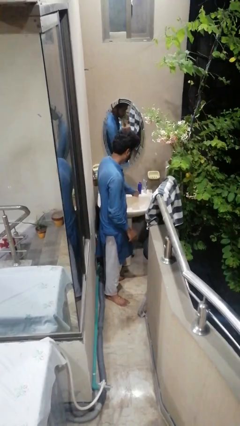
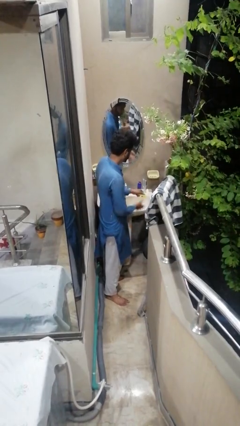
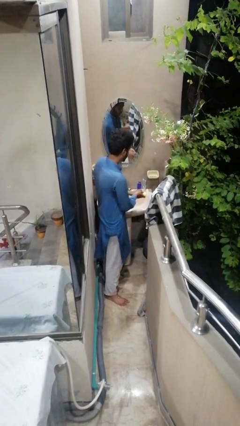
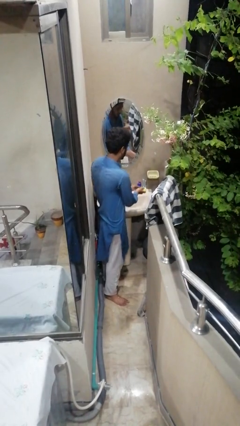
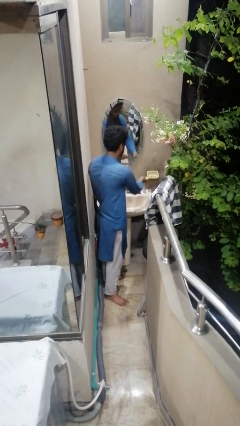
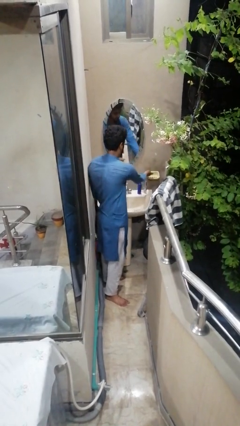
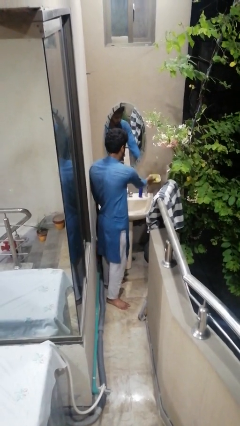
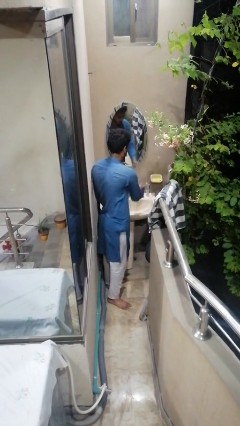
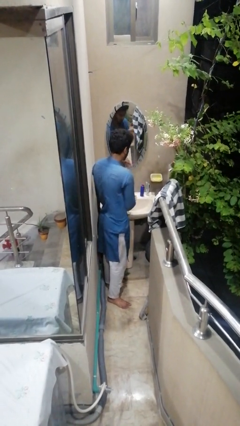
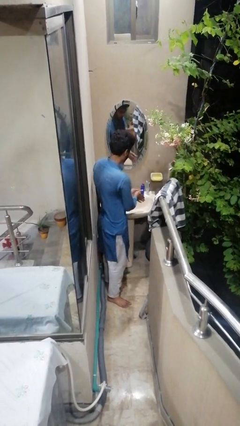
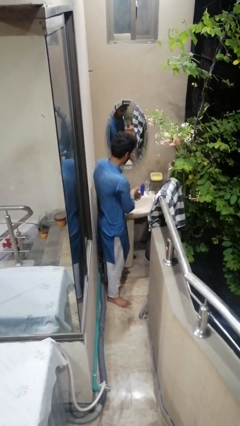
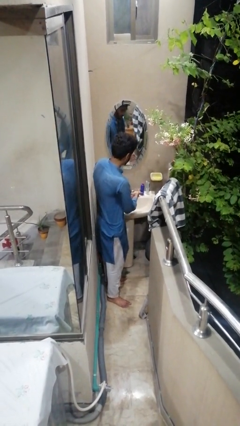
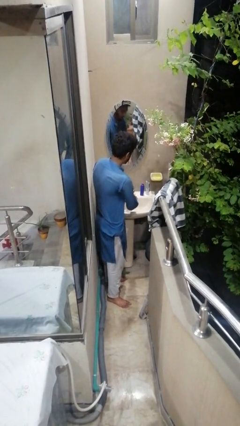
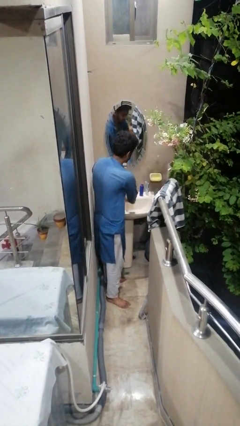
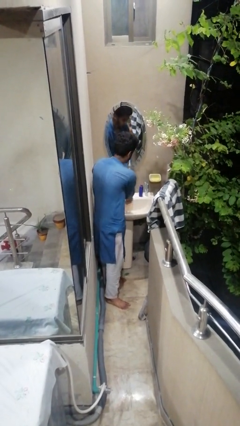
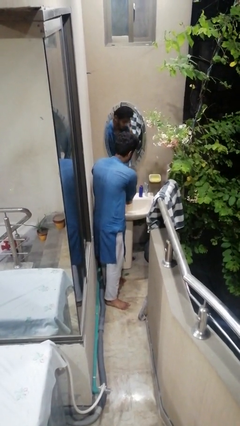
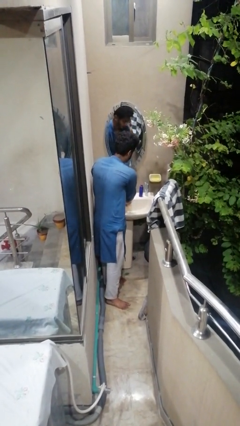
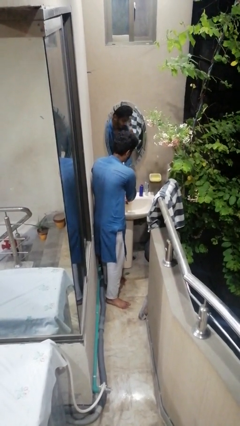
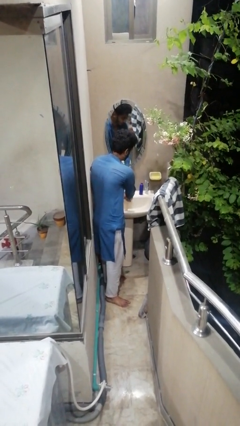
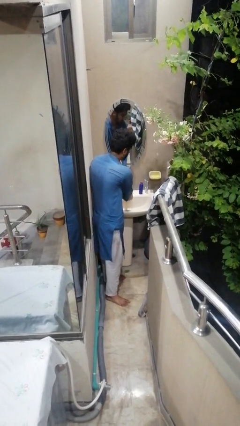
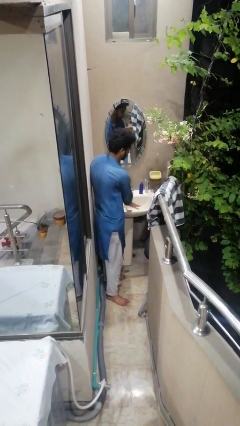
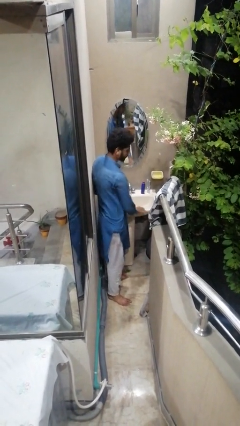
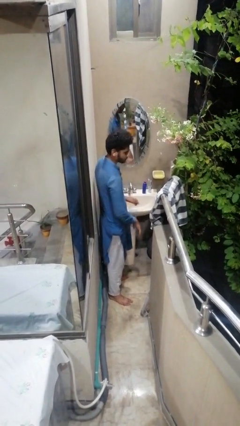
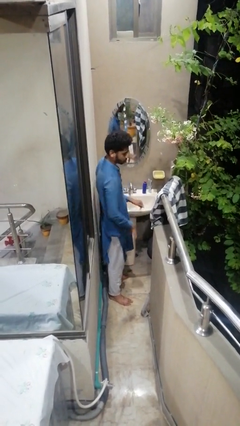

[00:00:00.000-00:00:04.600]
person washes hands

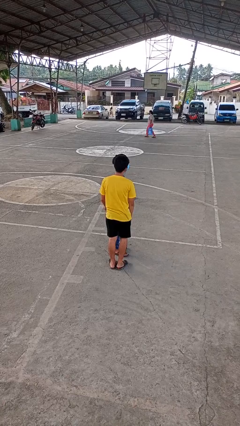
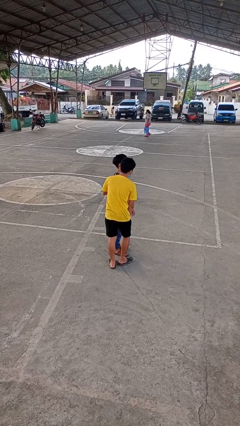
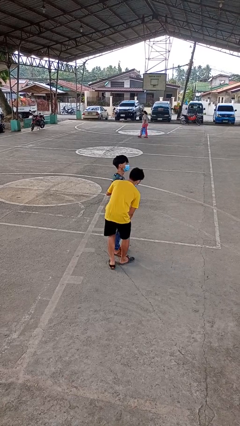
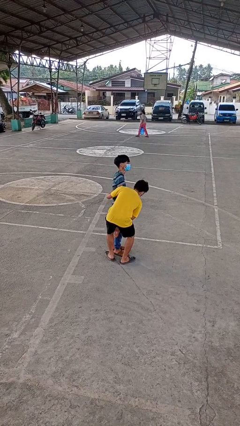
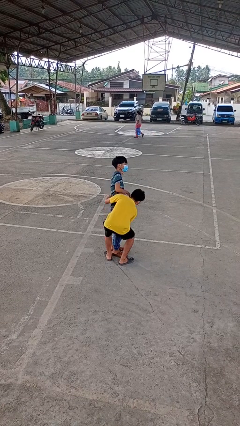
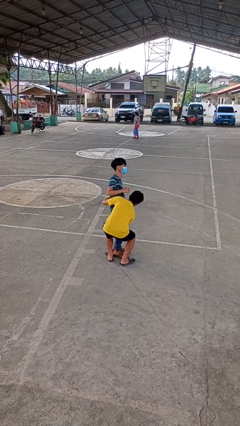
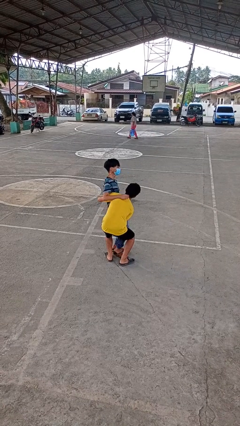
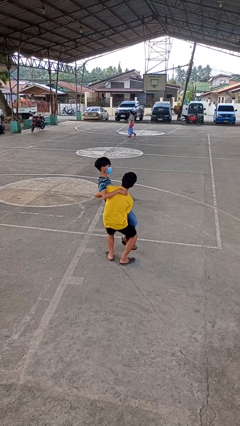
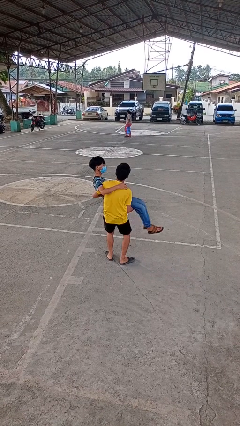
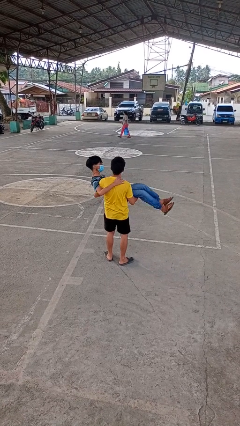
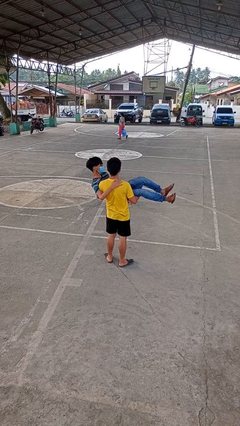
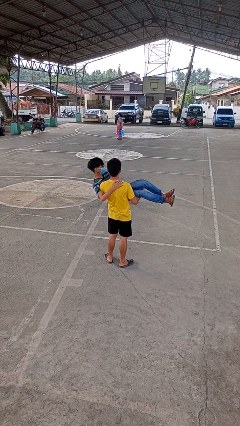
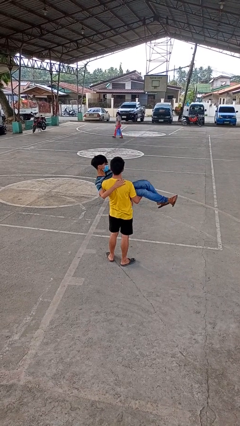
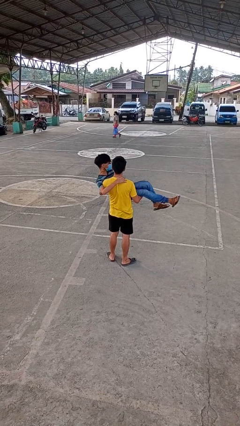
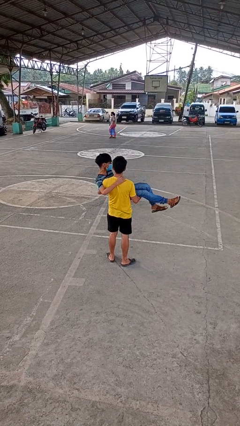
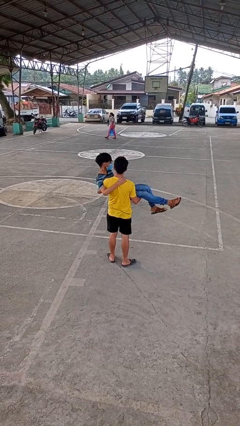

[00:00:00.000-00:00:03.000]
person picks up person

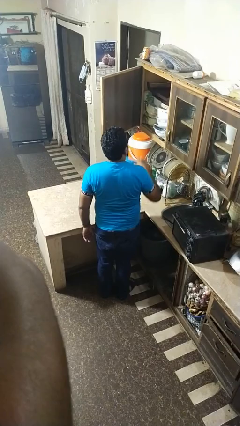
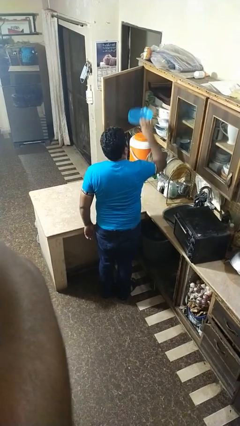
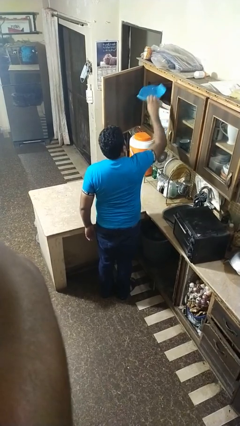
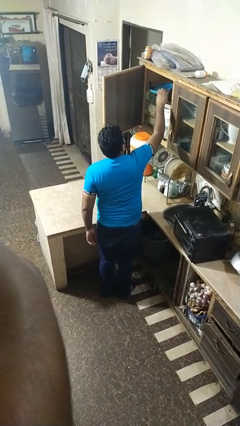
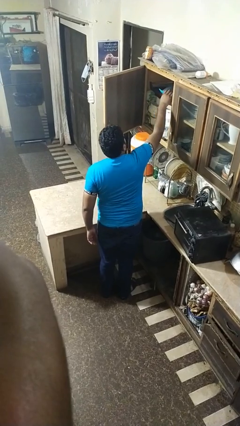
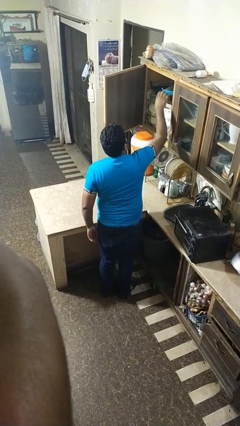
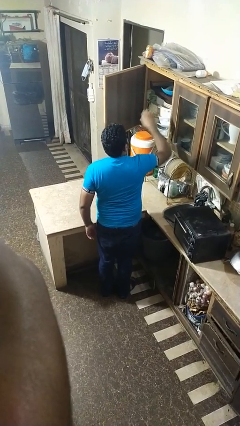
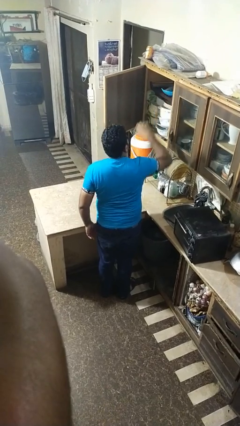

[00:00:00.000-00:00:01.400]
person takes object from cabinet

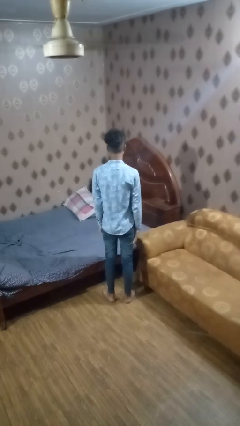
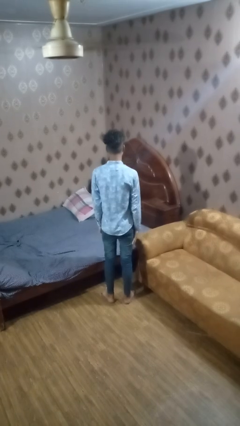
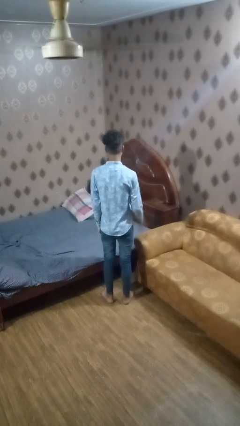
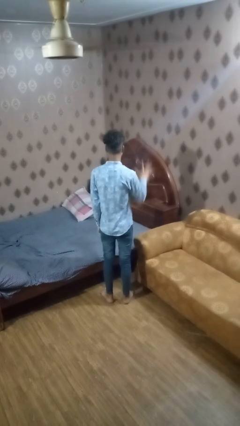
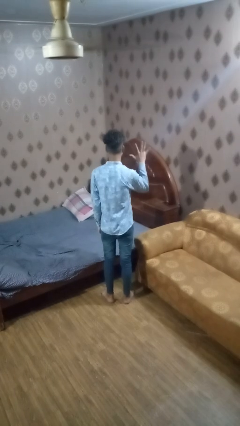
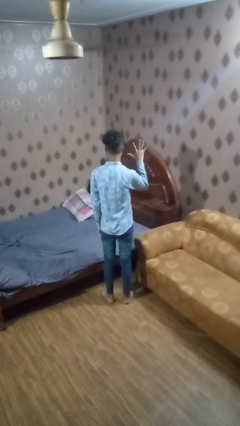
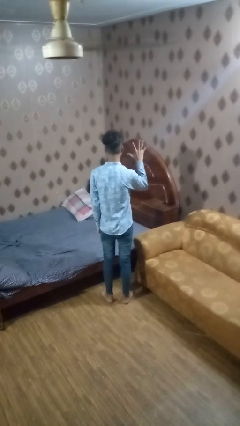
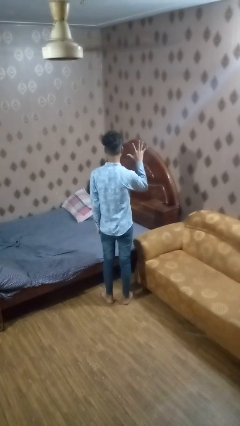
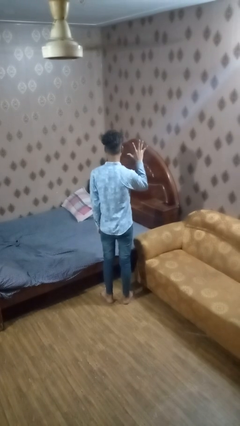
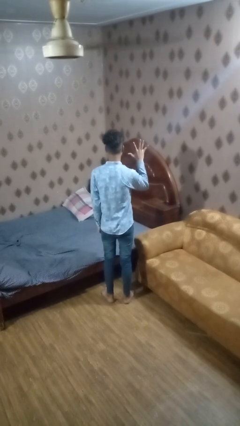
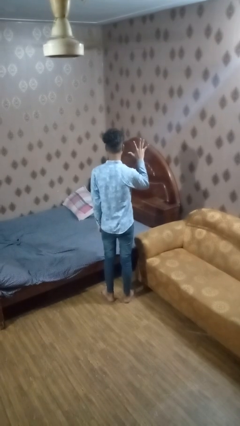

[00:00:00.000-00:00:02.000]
person gestures number five

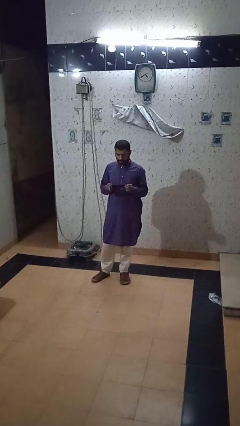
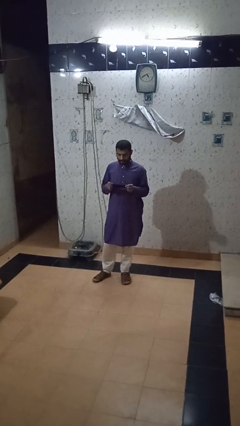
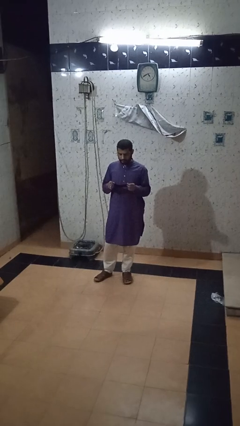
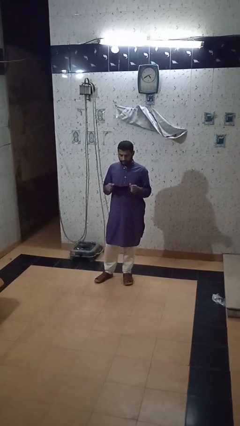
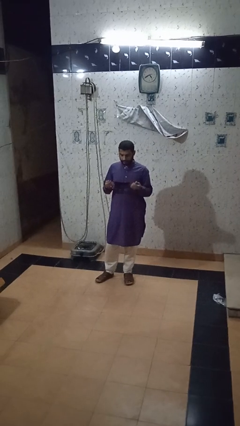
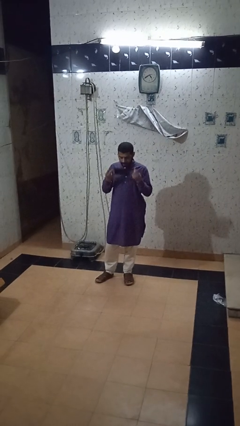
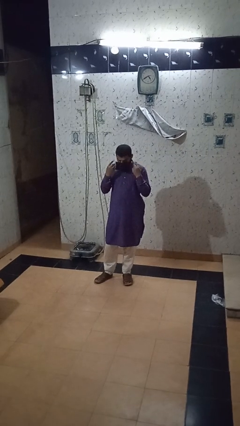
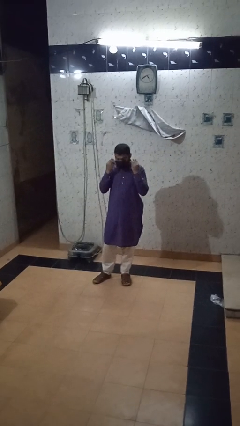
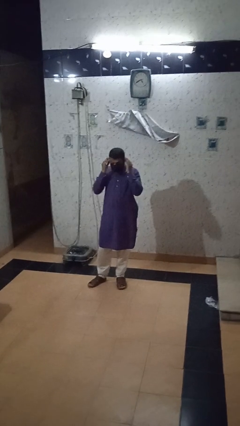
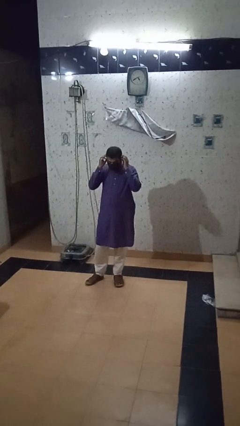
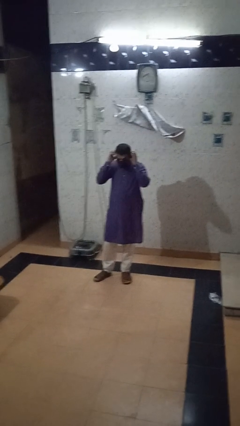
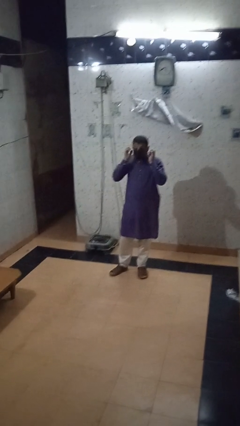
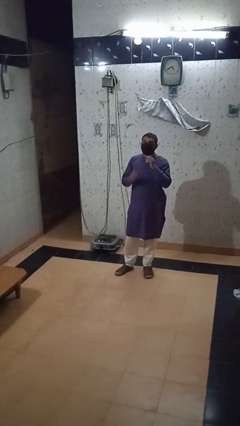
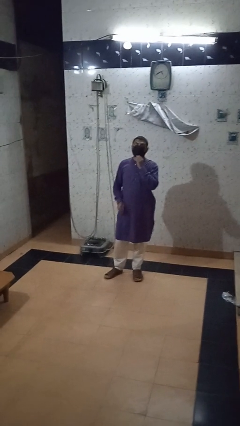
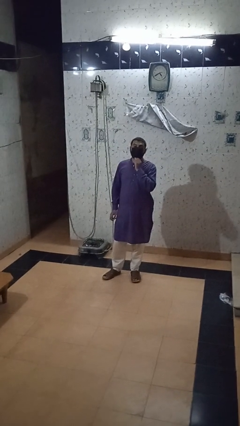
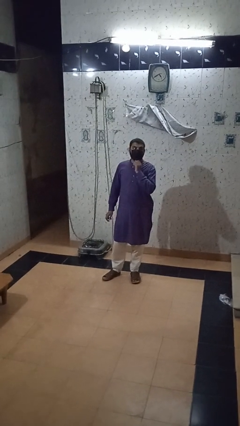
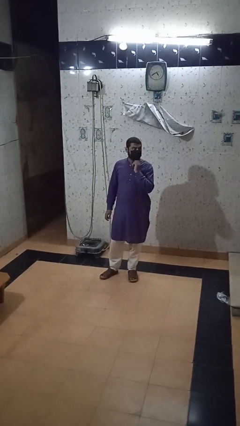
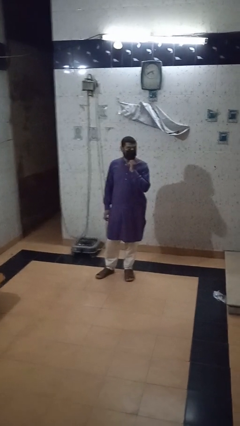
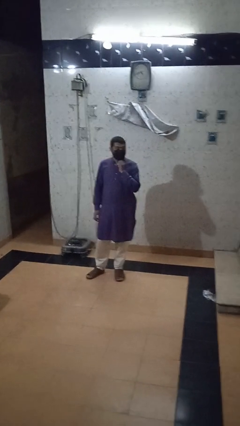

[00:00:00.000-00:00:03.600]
person puts on facemask

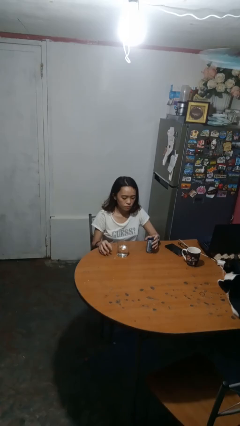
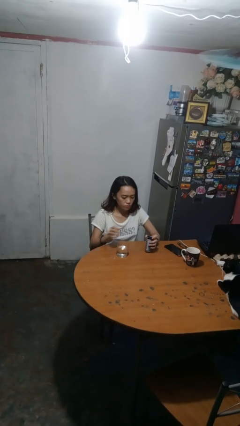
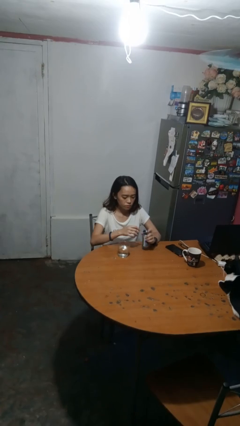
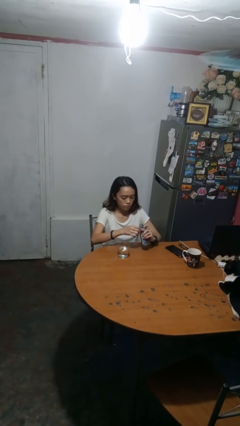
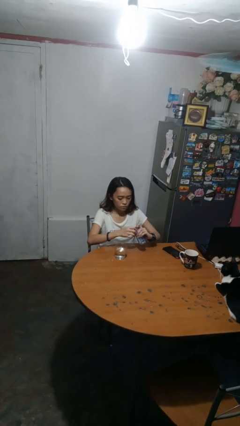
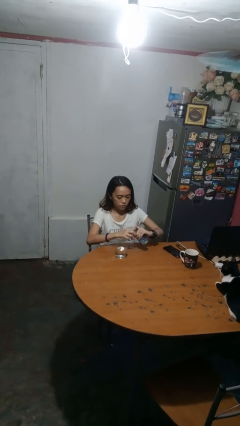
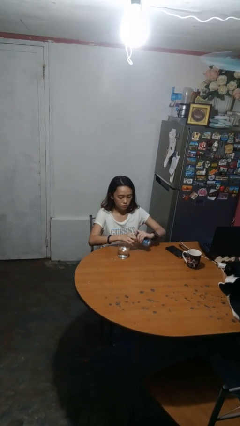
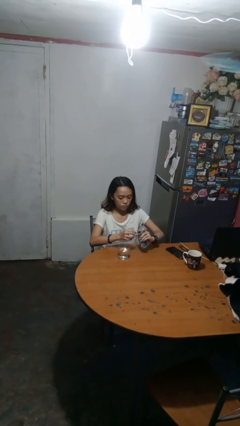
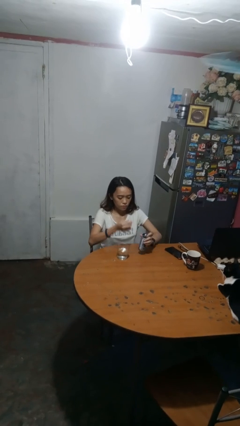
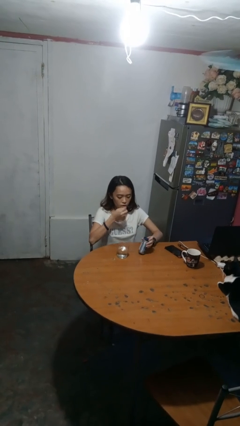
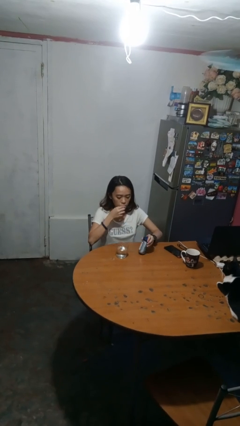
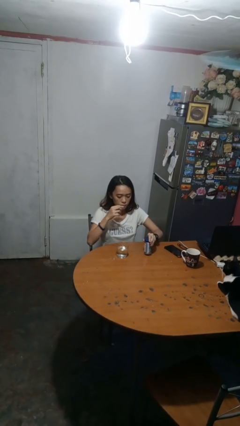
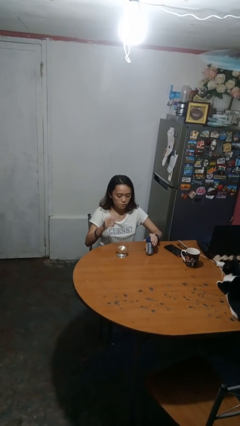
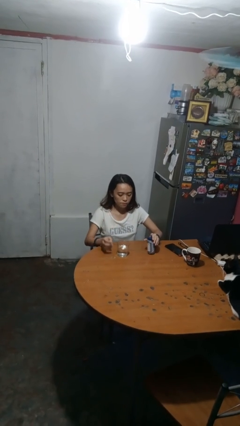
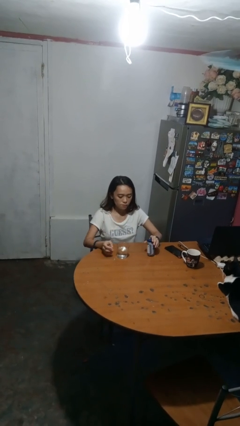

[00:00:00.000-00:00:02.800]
person takes medicine pills
